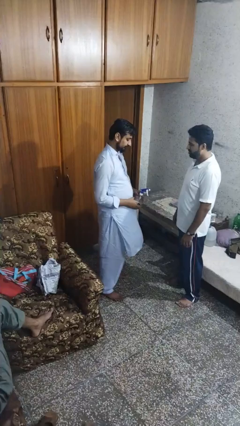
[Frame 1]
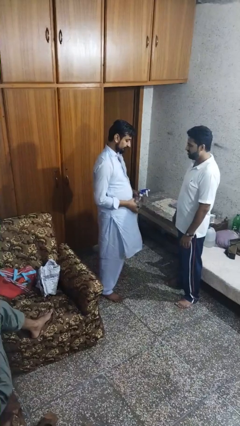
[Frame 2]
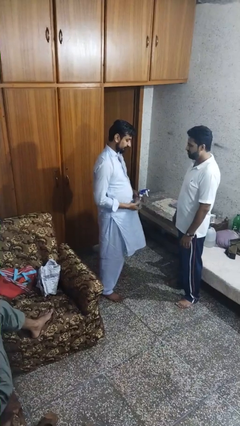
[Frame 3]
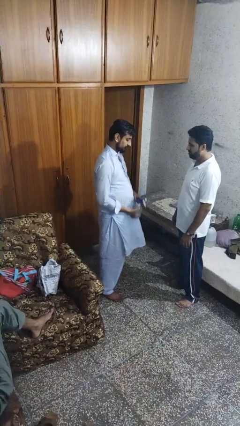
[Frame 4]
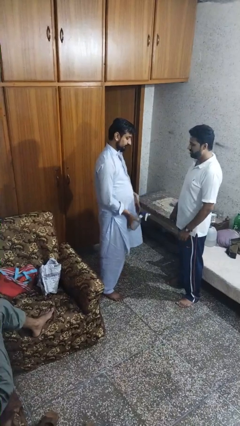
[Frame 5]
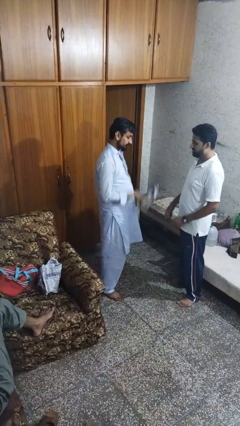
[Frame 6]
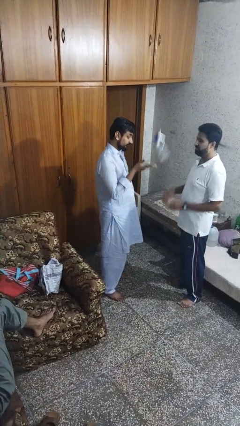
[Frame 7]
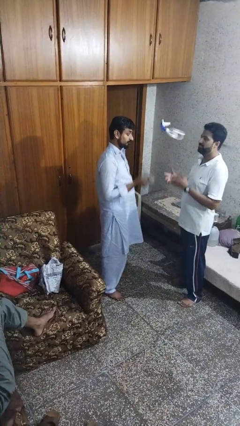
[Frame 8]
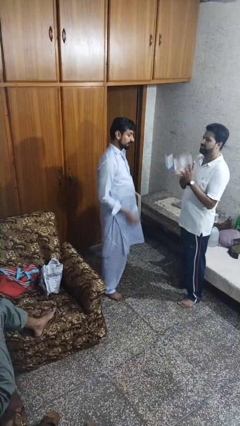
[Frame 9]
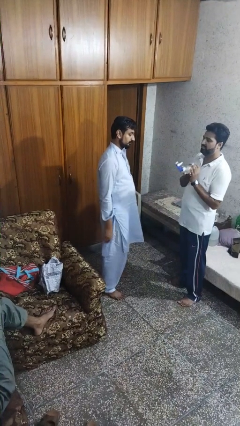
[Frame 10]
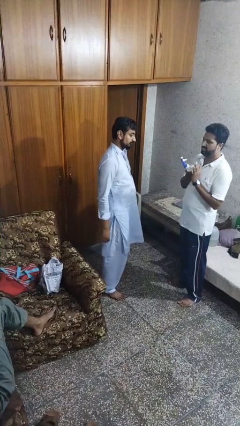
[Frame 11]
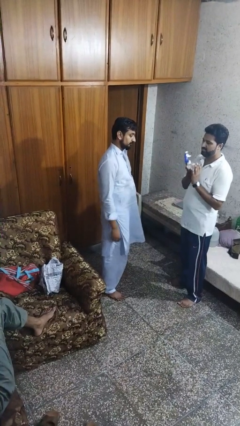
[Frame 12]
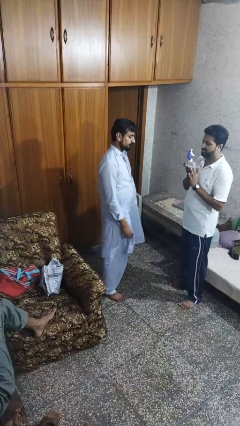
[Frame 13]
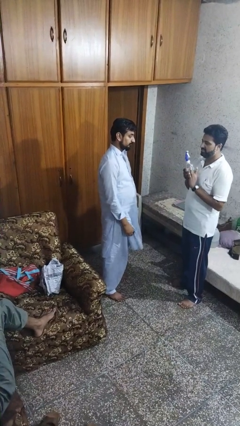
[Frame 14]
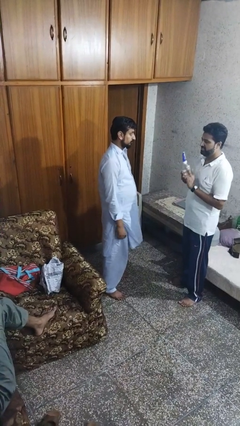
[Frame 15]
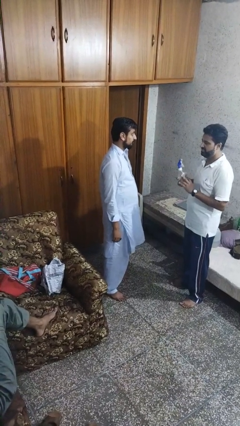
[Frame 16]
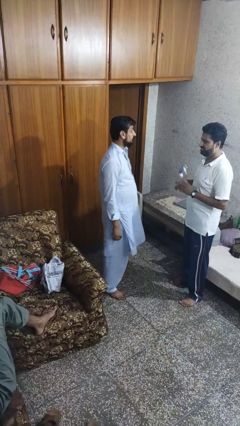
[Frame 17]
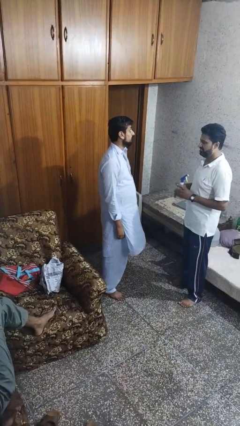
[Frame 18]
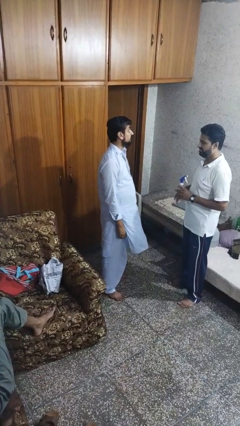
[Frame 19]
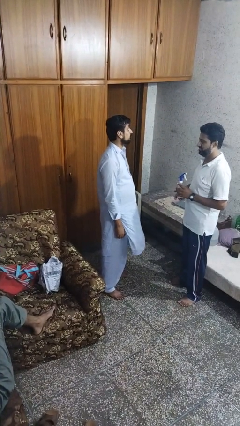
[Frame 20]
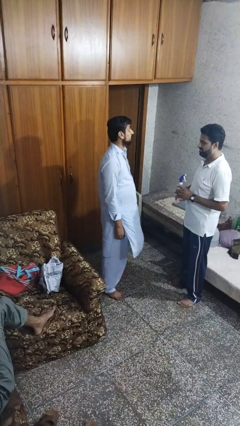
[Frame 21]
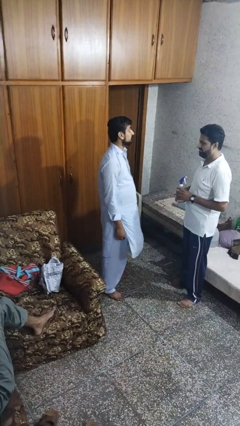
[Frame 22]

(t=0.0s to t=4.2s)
person throws object to person

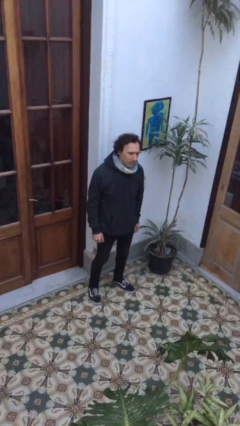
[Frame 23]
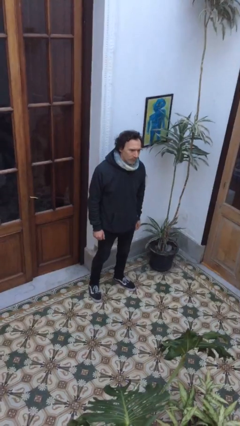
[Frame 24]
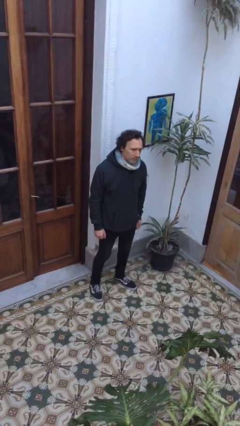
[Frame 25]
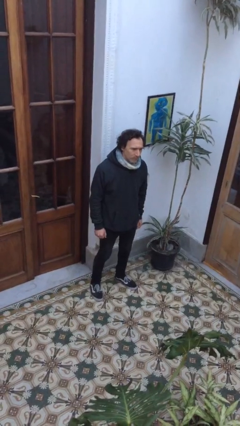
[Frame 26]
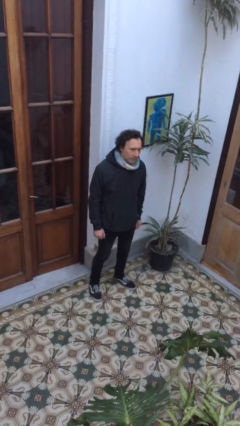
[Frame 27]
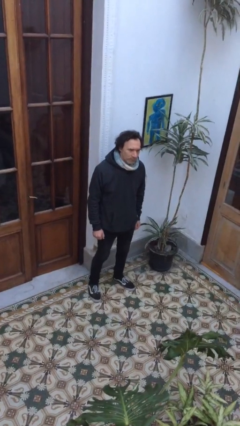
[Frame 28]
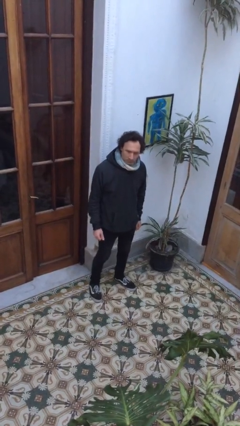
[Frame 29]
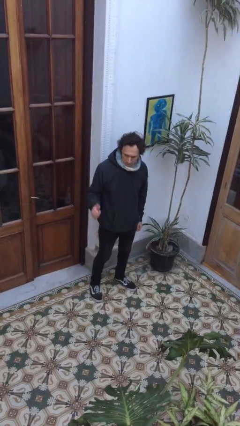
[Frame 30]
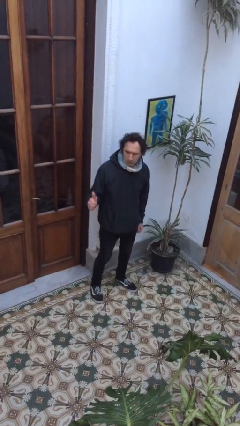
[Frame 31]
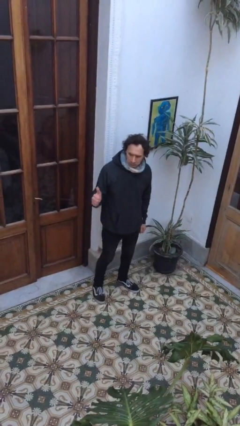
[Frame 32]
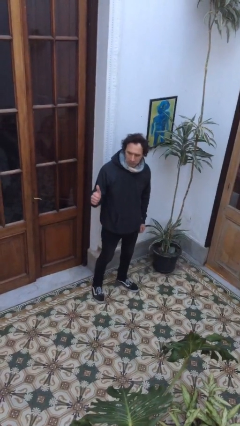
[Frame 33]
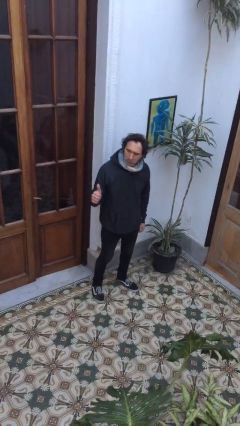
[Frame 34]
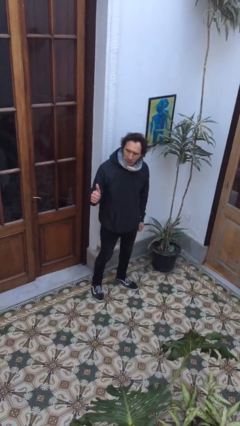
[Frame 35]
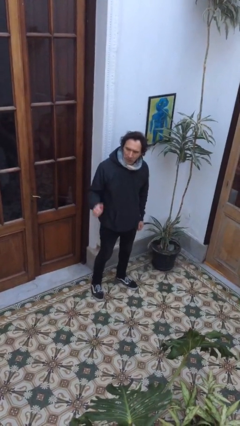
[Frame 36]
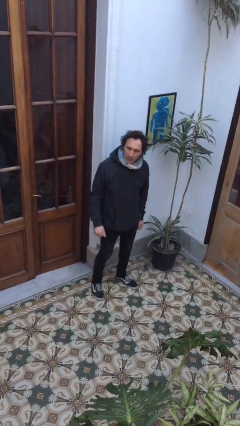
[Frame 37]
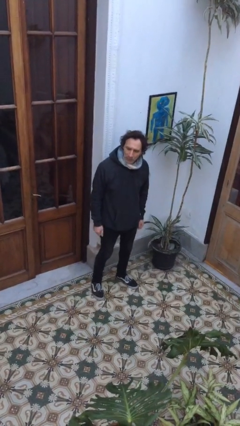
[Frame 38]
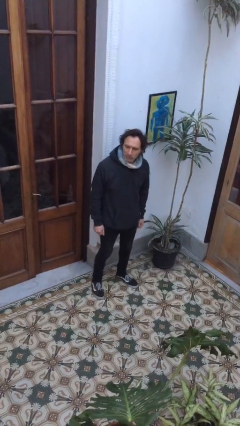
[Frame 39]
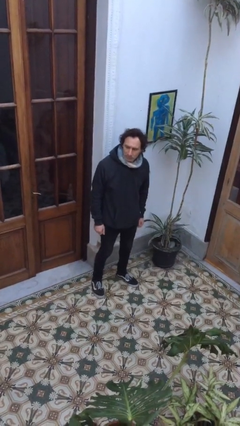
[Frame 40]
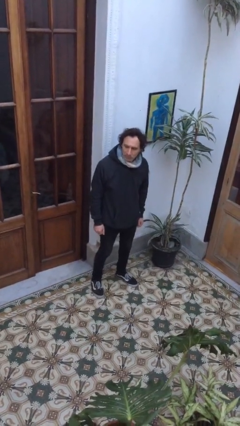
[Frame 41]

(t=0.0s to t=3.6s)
person gestures thumbs up

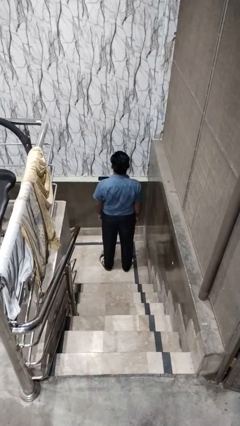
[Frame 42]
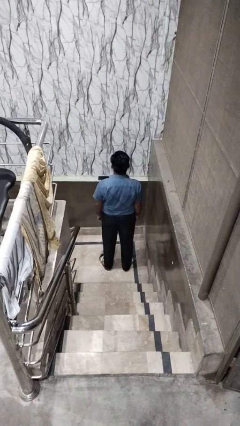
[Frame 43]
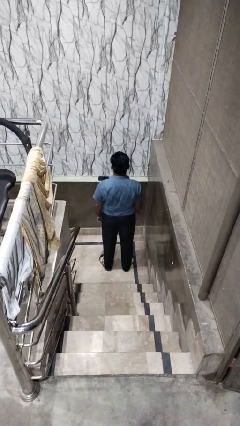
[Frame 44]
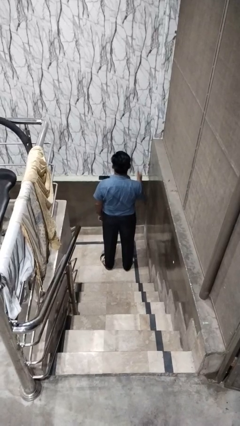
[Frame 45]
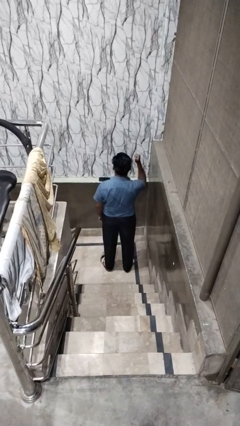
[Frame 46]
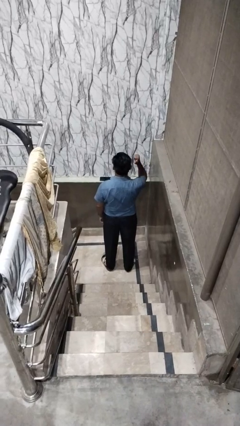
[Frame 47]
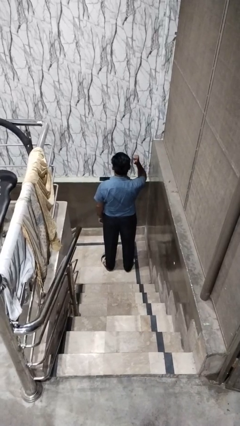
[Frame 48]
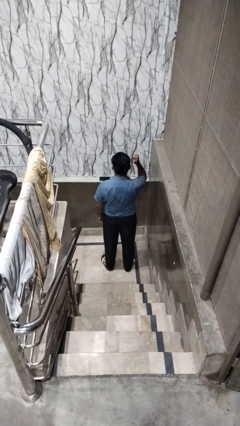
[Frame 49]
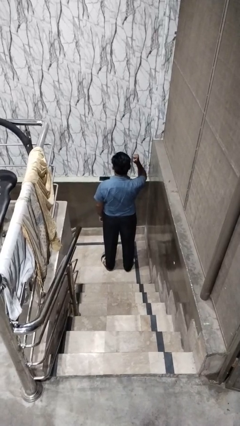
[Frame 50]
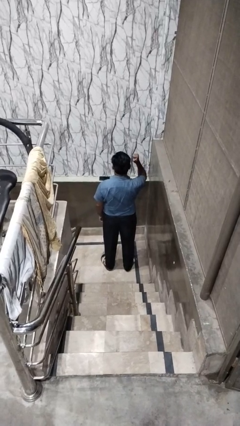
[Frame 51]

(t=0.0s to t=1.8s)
person gestures behind me

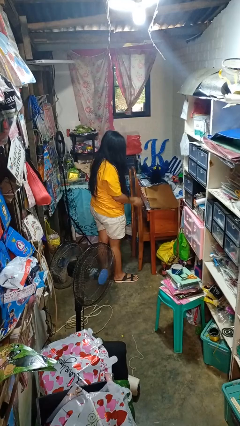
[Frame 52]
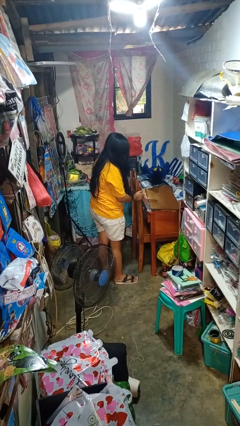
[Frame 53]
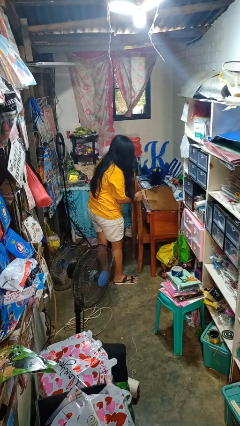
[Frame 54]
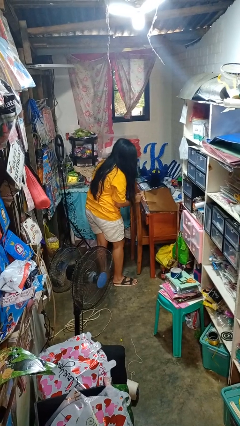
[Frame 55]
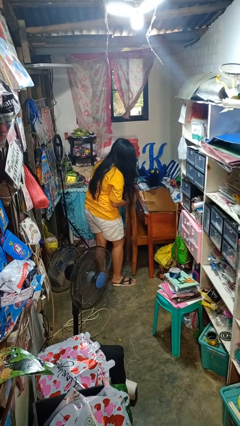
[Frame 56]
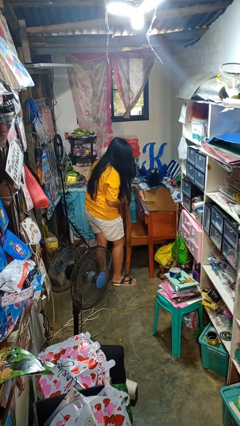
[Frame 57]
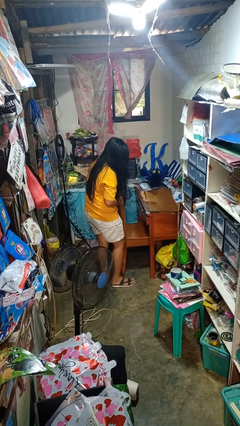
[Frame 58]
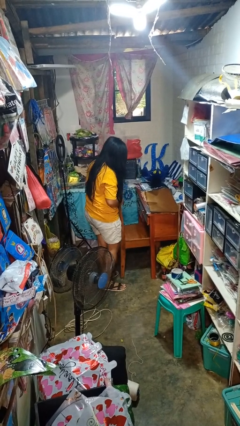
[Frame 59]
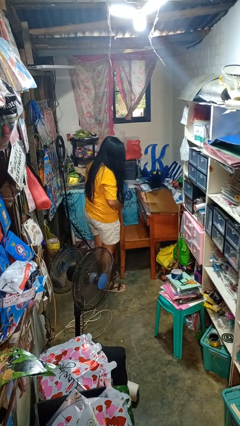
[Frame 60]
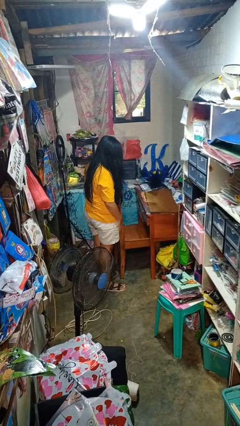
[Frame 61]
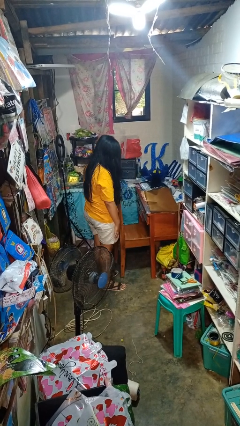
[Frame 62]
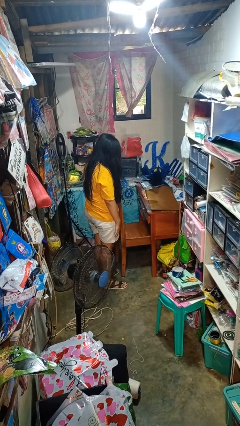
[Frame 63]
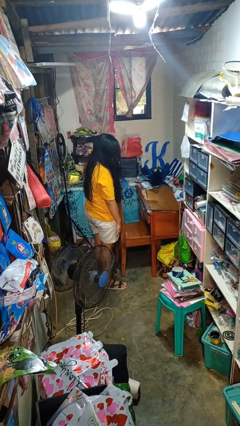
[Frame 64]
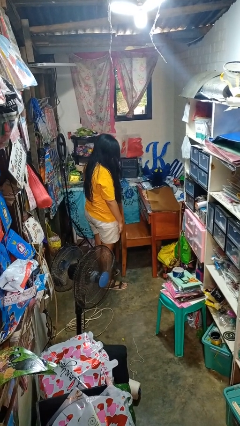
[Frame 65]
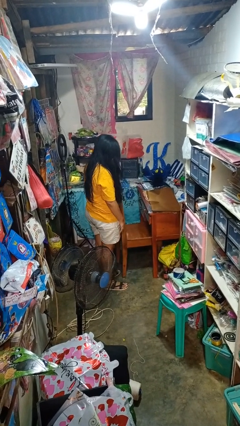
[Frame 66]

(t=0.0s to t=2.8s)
person pulls out chair

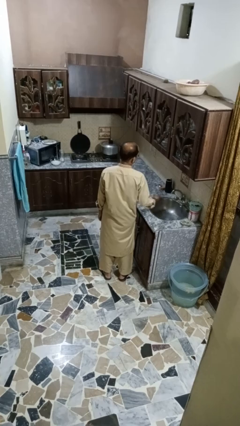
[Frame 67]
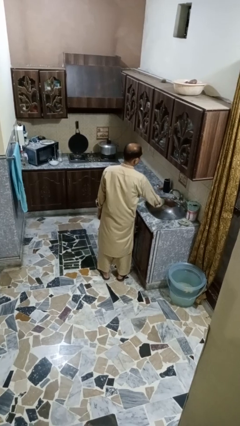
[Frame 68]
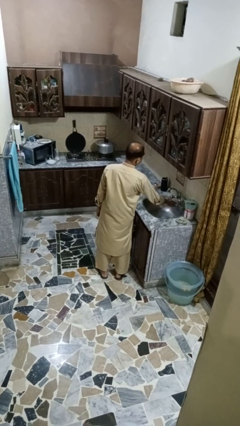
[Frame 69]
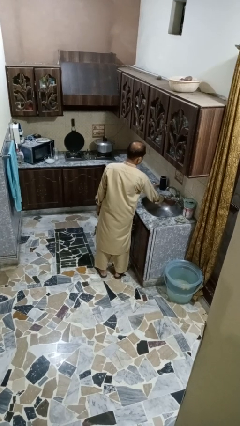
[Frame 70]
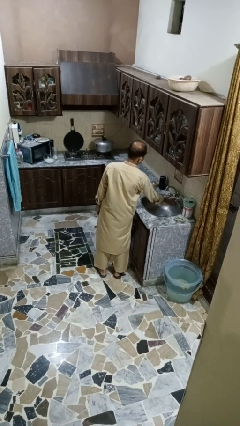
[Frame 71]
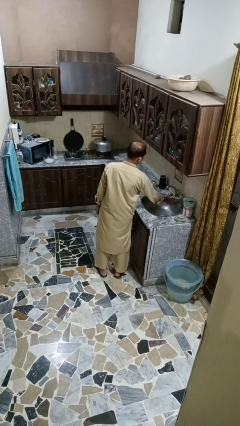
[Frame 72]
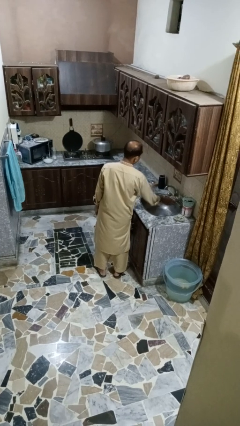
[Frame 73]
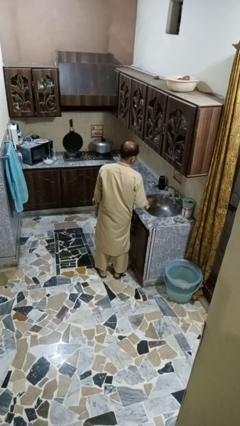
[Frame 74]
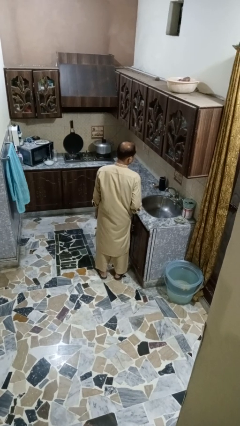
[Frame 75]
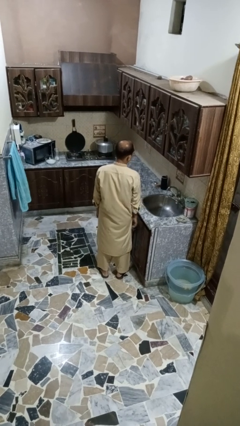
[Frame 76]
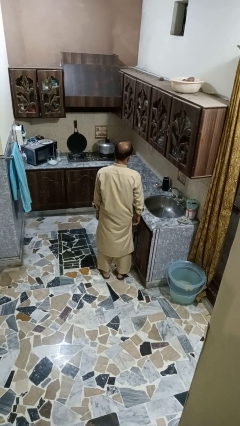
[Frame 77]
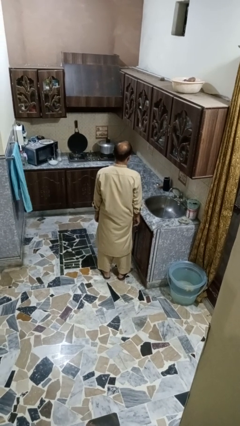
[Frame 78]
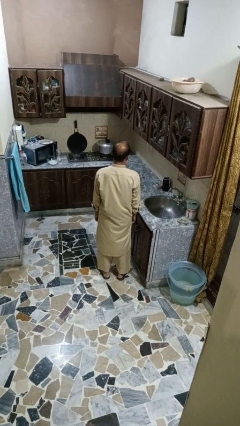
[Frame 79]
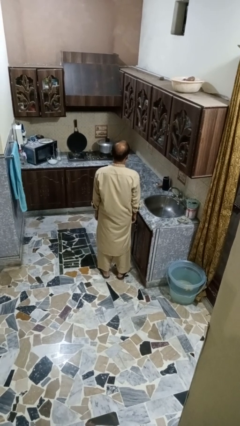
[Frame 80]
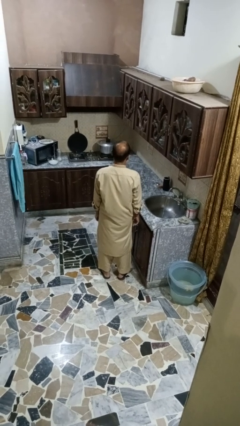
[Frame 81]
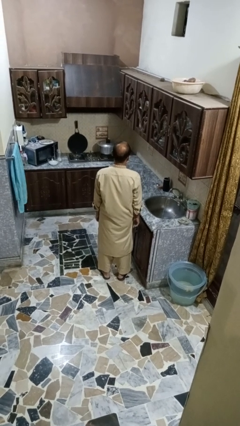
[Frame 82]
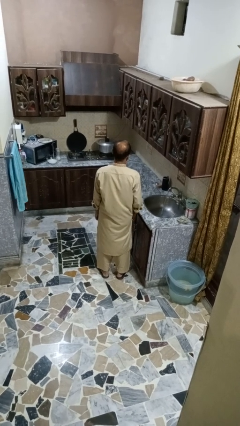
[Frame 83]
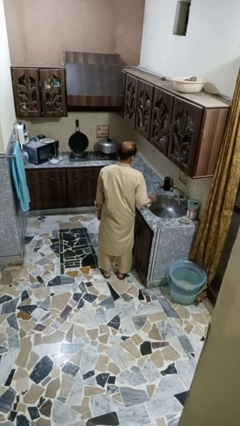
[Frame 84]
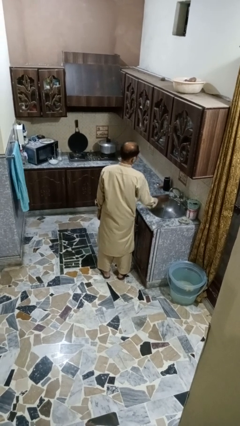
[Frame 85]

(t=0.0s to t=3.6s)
person turns on faucet

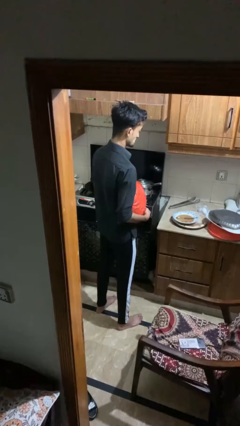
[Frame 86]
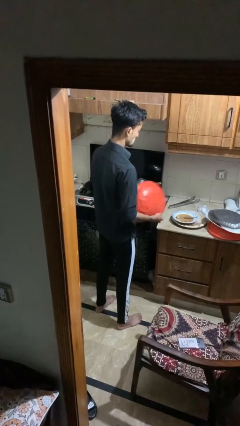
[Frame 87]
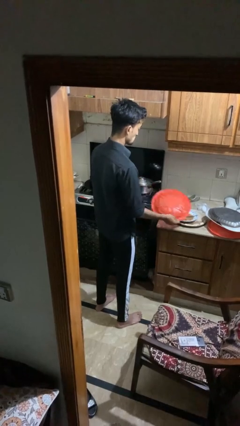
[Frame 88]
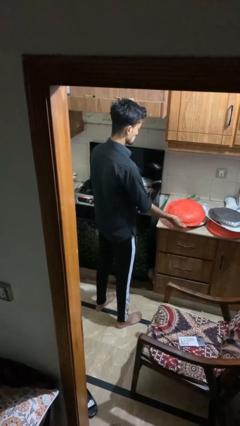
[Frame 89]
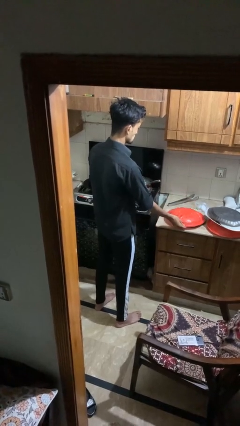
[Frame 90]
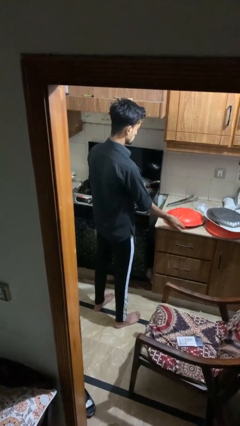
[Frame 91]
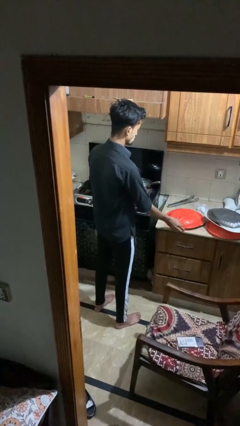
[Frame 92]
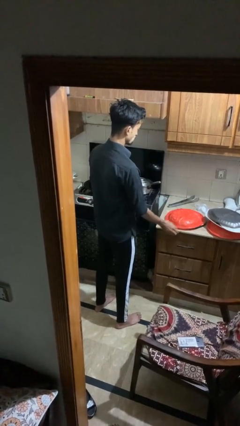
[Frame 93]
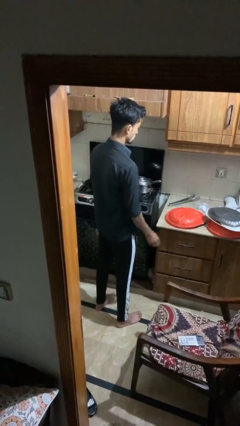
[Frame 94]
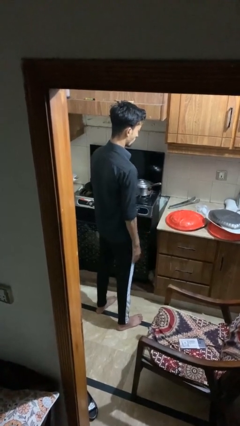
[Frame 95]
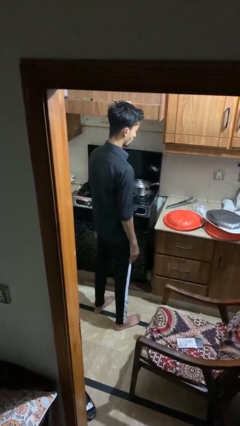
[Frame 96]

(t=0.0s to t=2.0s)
person puts down object on shelf
